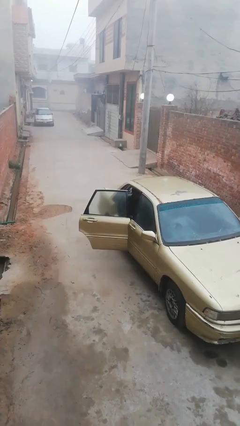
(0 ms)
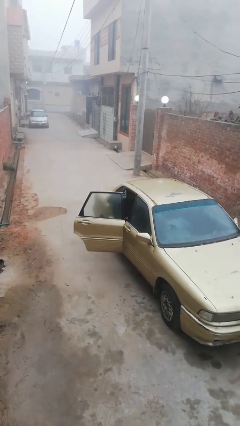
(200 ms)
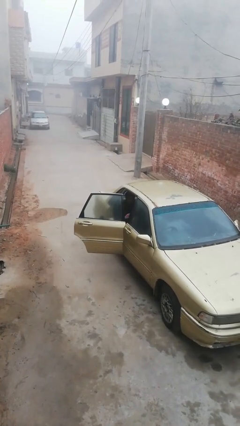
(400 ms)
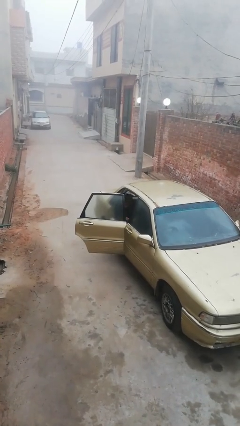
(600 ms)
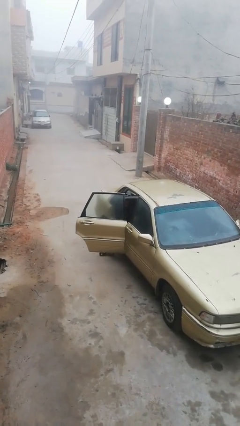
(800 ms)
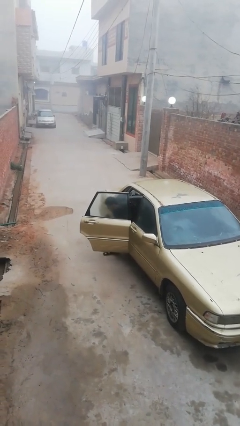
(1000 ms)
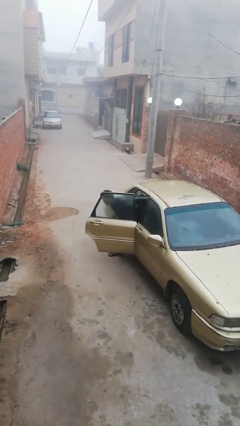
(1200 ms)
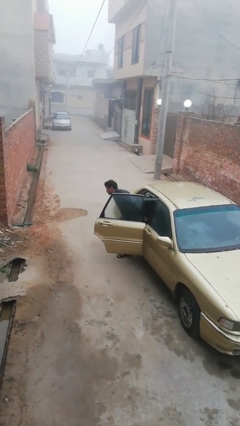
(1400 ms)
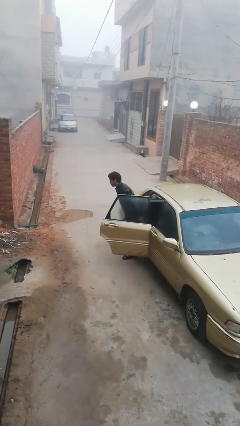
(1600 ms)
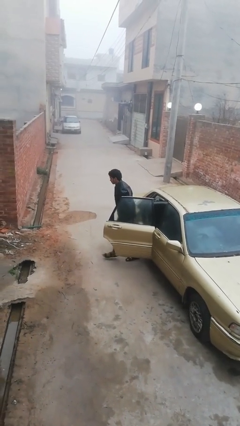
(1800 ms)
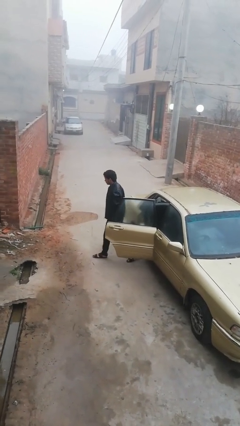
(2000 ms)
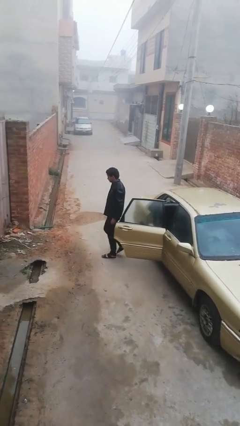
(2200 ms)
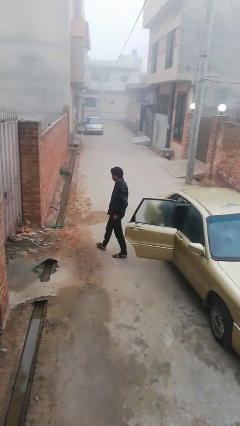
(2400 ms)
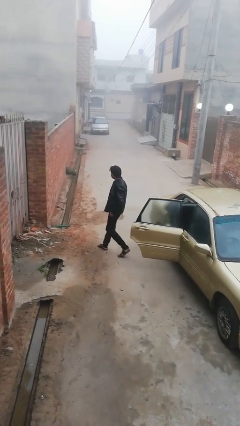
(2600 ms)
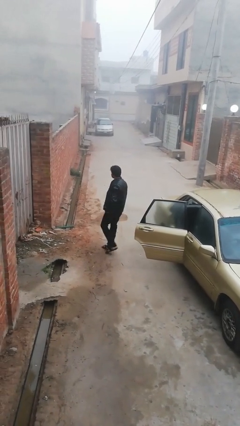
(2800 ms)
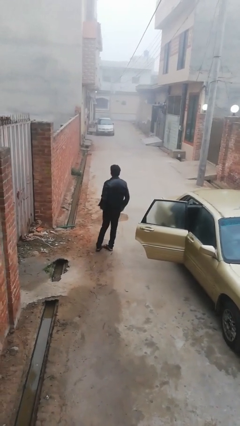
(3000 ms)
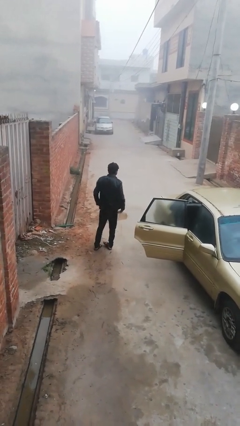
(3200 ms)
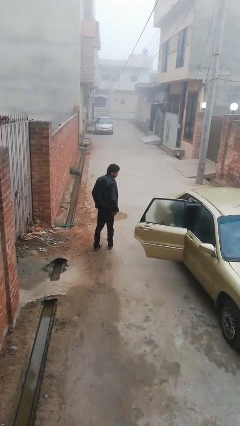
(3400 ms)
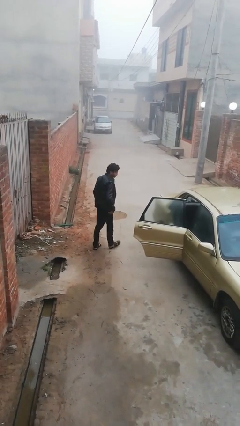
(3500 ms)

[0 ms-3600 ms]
person exits car

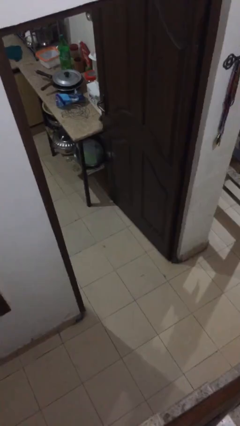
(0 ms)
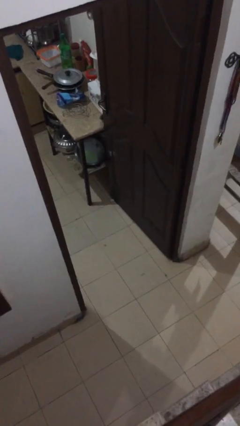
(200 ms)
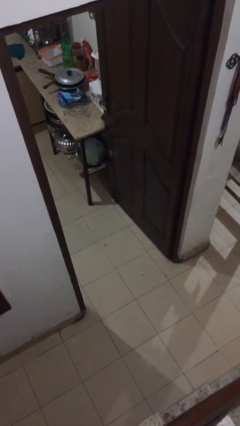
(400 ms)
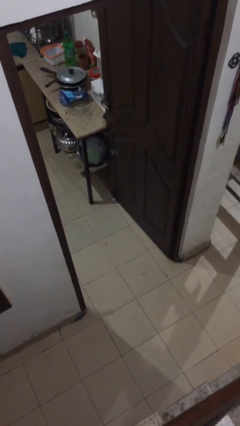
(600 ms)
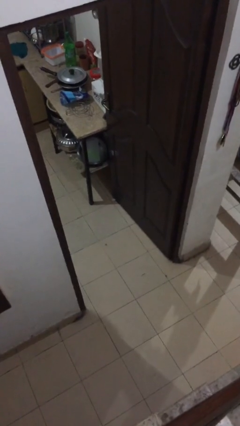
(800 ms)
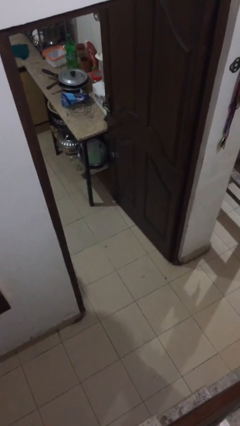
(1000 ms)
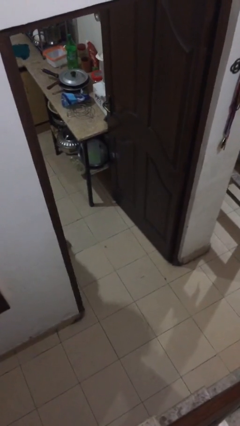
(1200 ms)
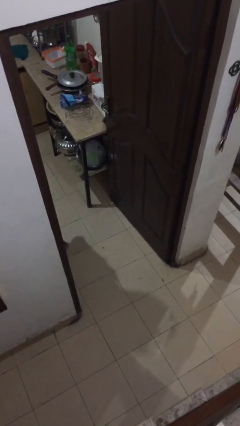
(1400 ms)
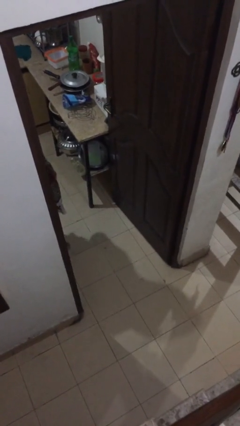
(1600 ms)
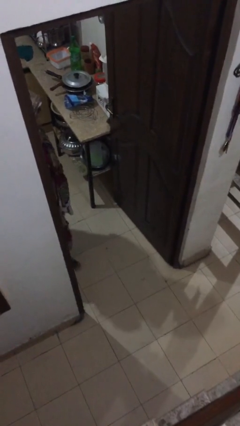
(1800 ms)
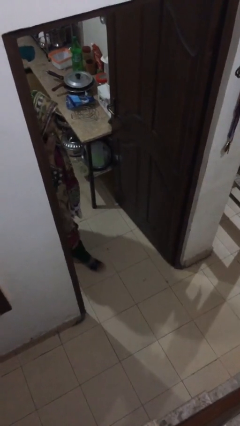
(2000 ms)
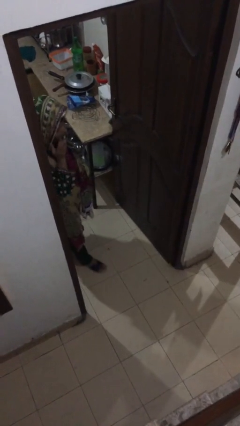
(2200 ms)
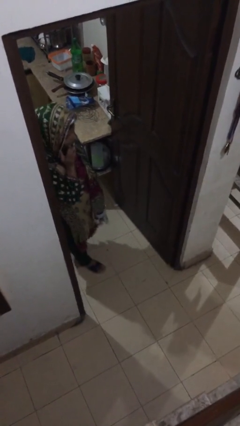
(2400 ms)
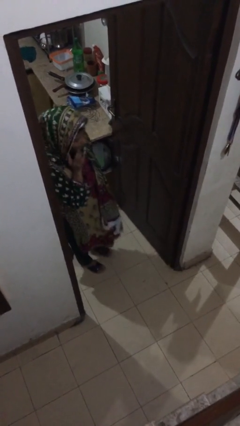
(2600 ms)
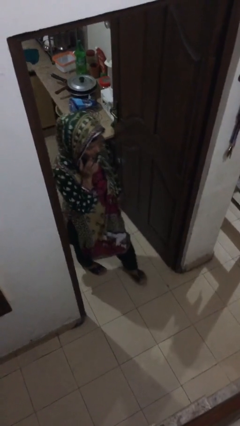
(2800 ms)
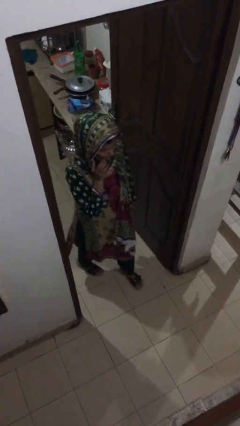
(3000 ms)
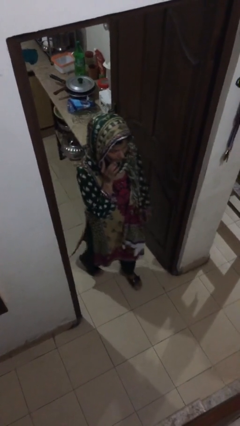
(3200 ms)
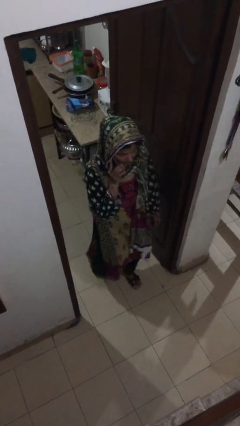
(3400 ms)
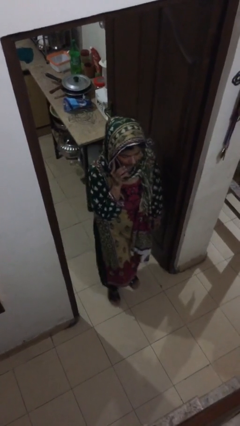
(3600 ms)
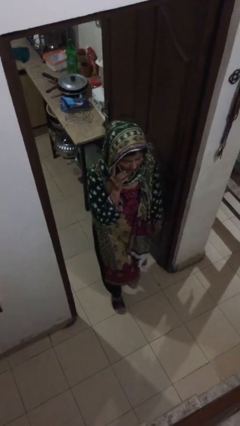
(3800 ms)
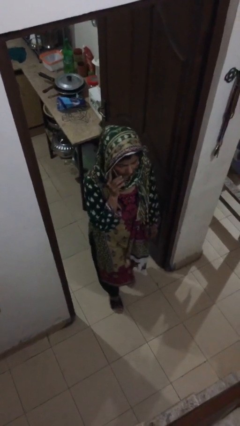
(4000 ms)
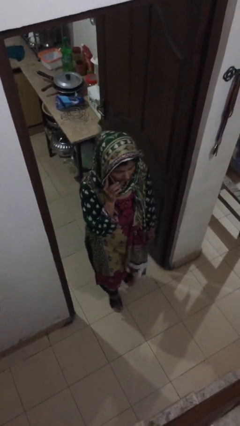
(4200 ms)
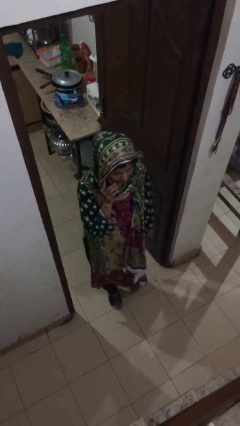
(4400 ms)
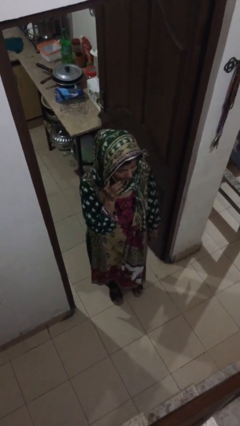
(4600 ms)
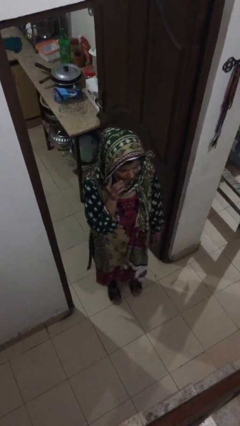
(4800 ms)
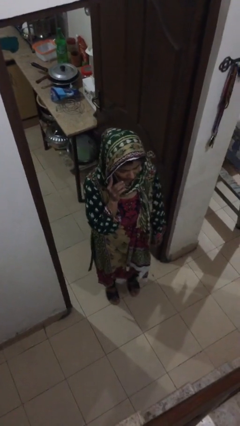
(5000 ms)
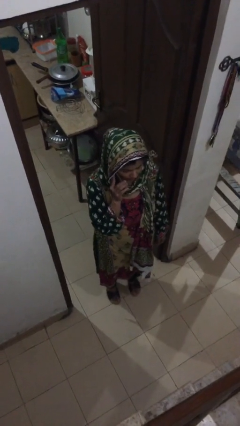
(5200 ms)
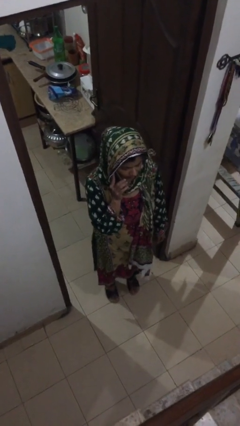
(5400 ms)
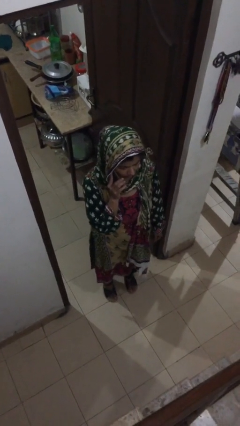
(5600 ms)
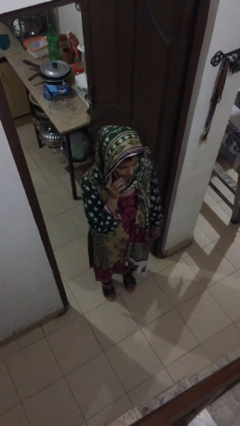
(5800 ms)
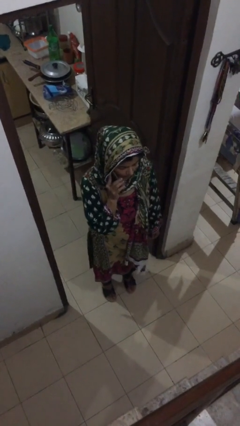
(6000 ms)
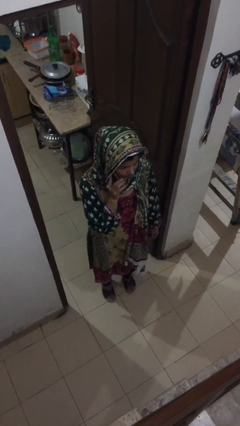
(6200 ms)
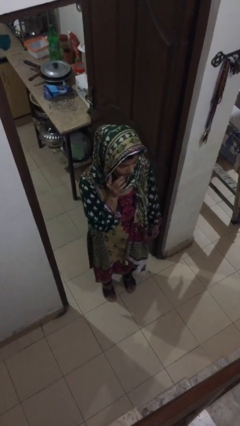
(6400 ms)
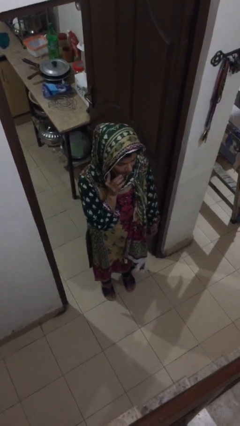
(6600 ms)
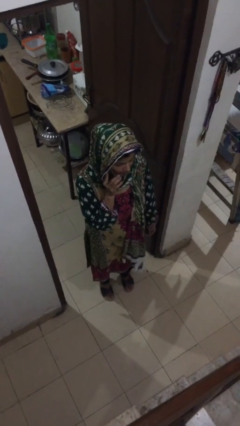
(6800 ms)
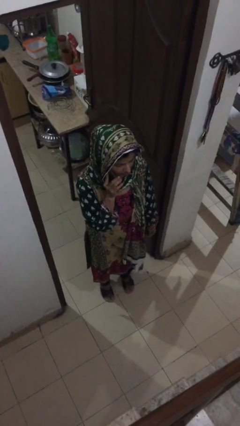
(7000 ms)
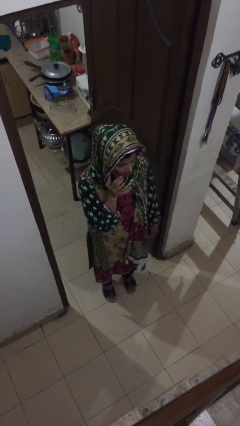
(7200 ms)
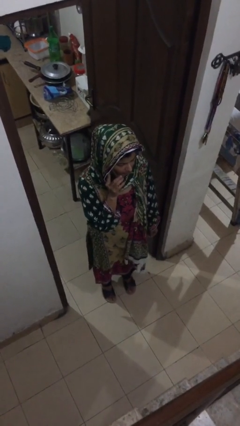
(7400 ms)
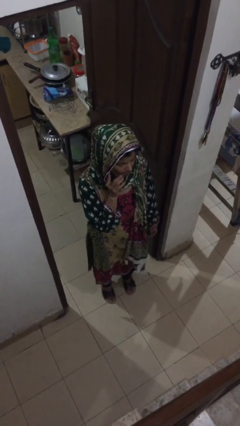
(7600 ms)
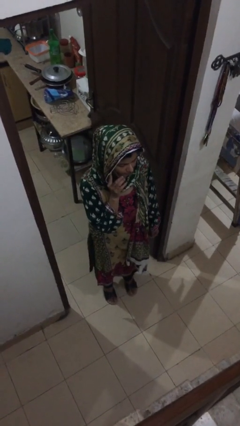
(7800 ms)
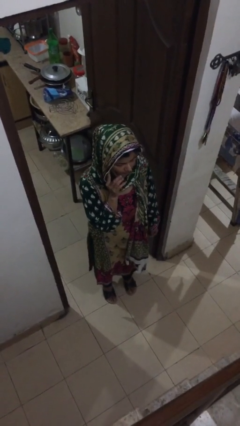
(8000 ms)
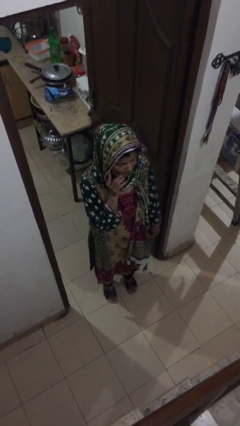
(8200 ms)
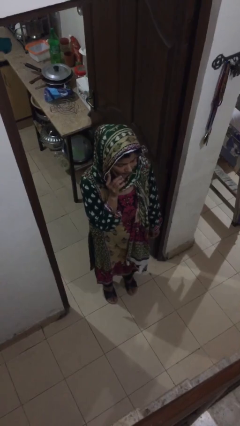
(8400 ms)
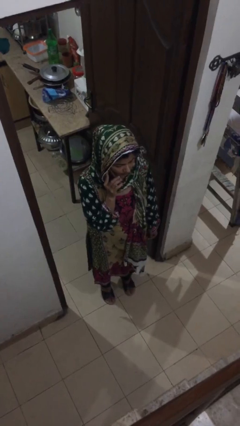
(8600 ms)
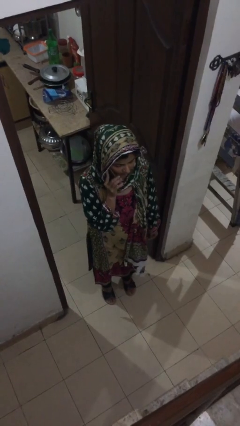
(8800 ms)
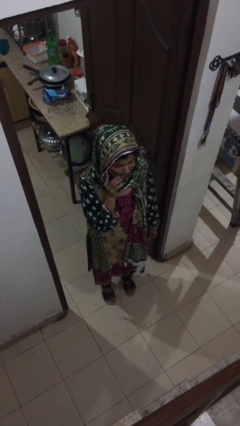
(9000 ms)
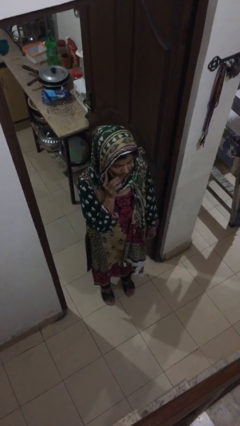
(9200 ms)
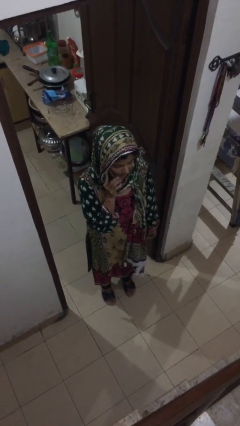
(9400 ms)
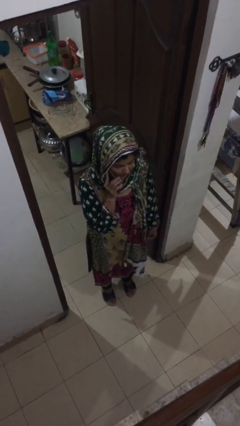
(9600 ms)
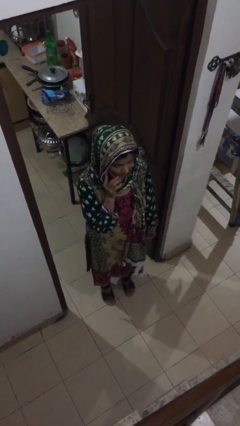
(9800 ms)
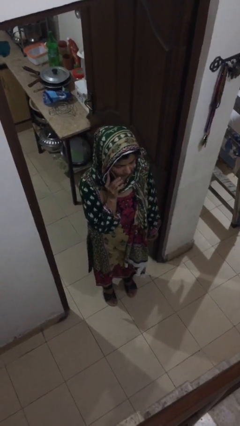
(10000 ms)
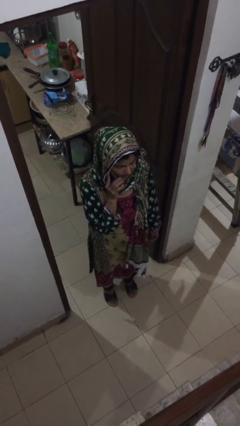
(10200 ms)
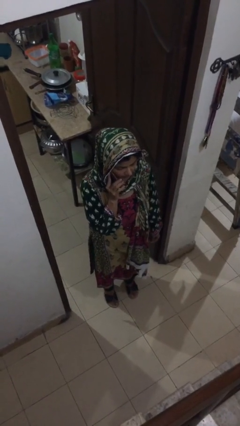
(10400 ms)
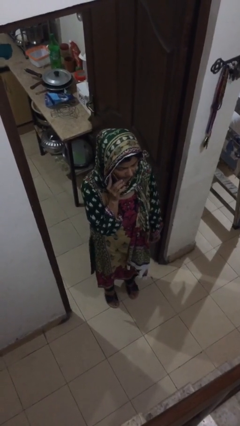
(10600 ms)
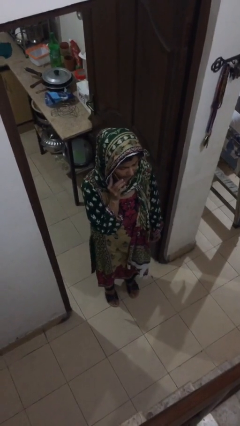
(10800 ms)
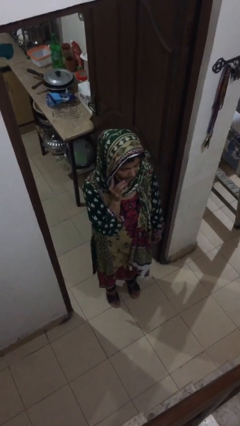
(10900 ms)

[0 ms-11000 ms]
person enters scene through structure

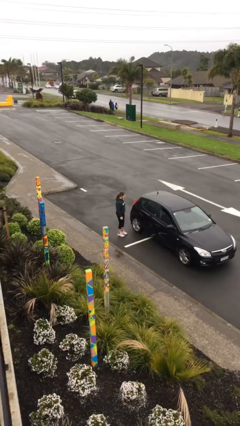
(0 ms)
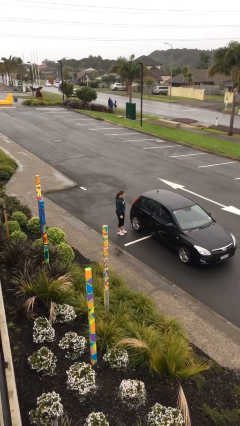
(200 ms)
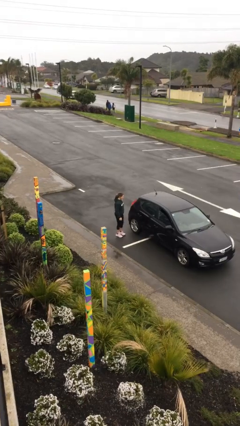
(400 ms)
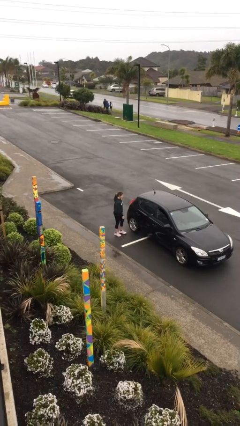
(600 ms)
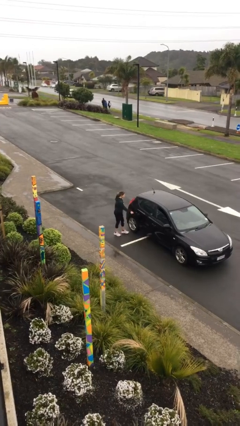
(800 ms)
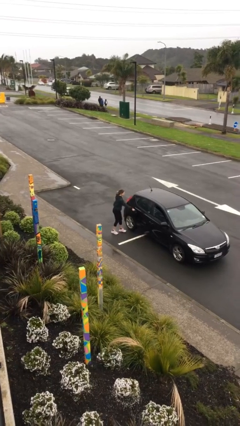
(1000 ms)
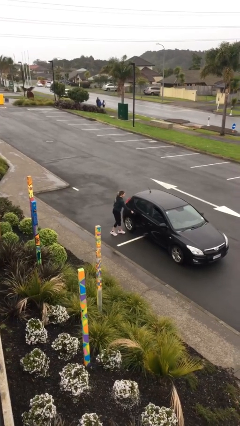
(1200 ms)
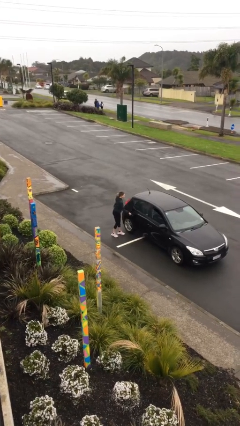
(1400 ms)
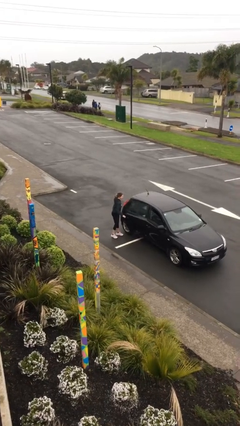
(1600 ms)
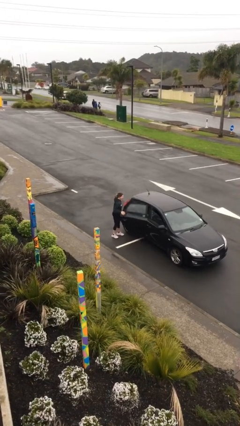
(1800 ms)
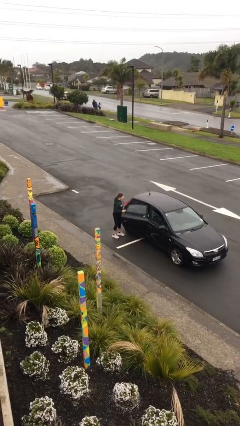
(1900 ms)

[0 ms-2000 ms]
person opens car door

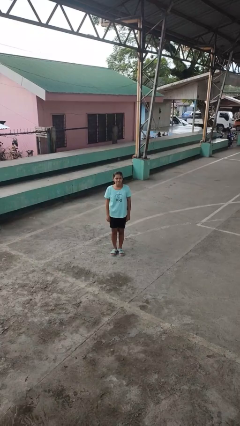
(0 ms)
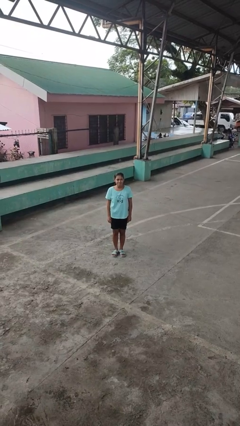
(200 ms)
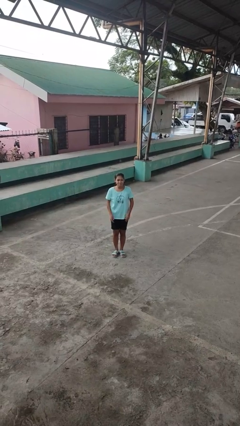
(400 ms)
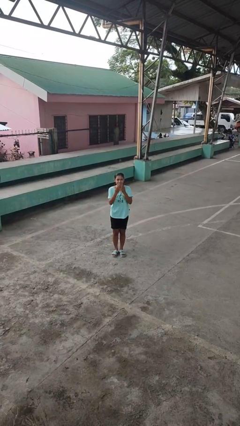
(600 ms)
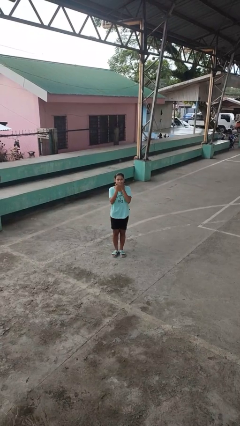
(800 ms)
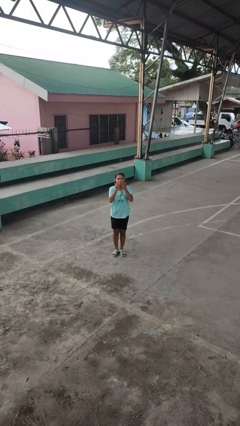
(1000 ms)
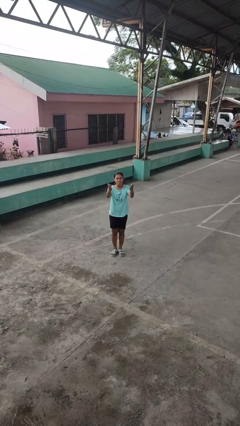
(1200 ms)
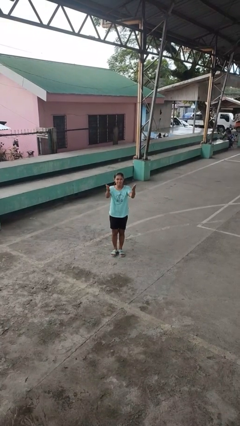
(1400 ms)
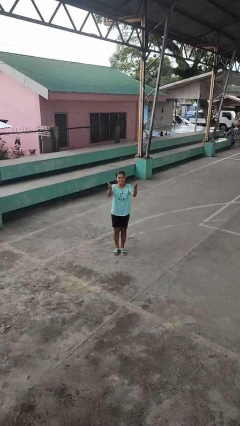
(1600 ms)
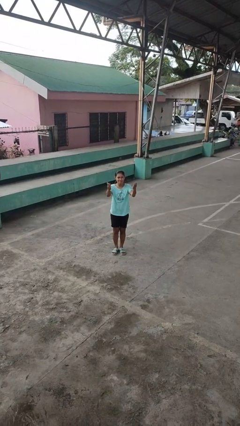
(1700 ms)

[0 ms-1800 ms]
person gestures blow kiss
